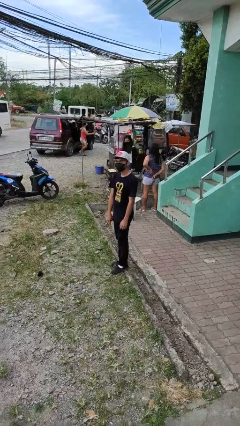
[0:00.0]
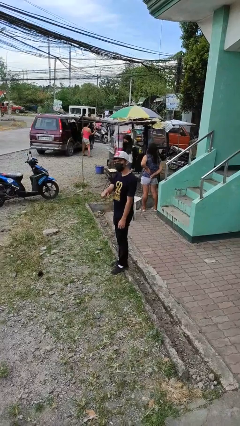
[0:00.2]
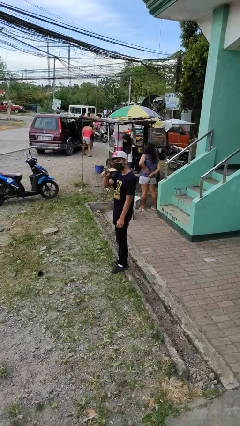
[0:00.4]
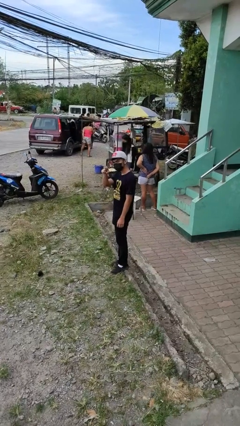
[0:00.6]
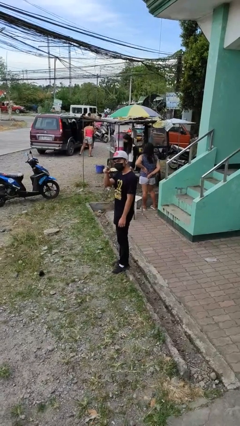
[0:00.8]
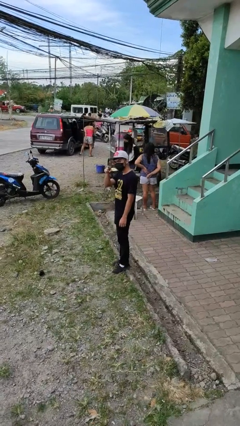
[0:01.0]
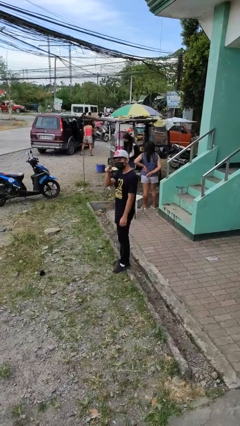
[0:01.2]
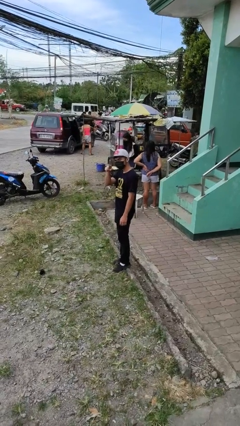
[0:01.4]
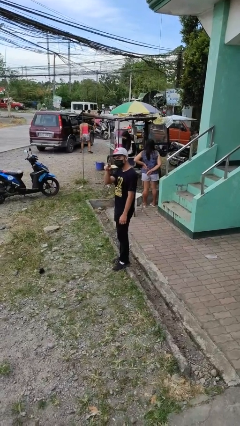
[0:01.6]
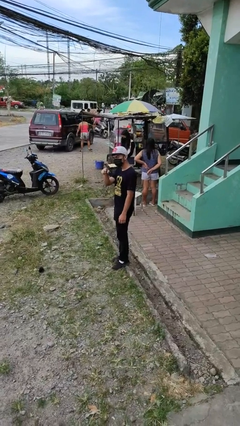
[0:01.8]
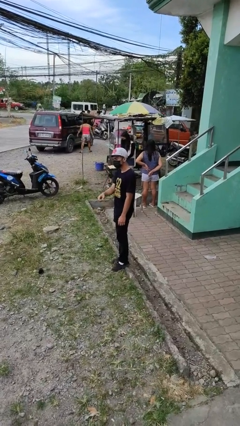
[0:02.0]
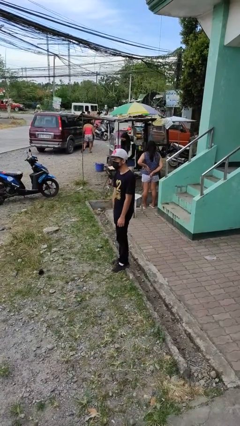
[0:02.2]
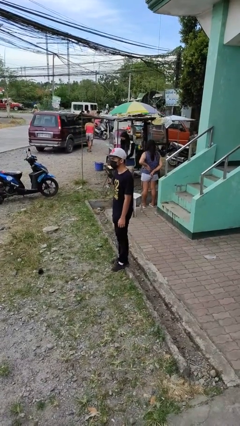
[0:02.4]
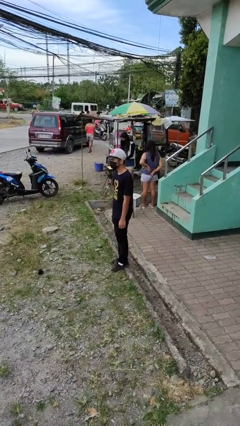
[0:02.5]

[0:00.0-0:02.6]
person points at person

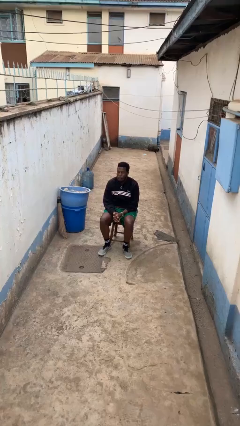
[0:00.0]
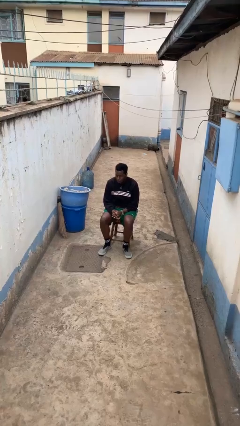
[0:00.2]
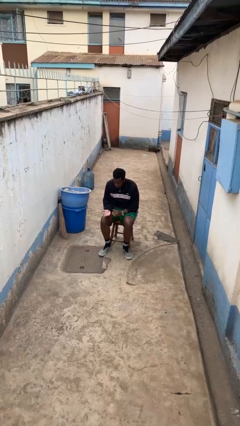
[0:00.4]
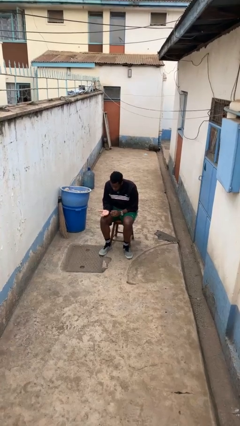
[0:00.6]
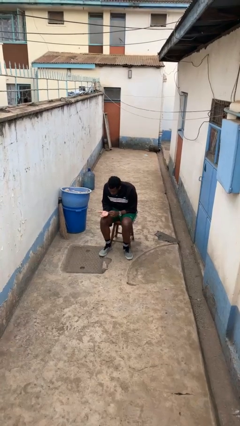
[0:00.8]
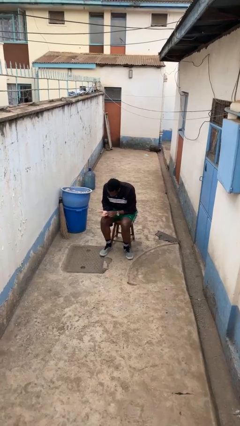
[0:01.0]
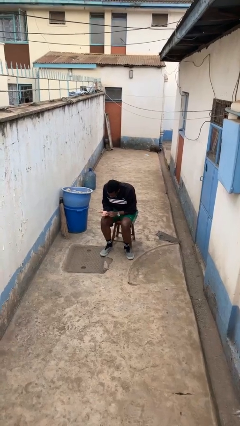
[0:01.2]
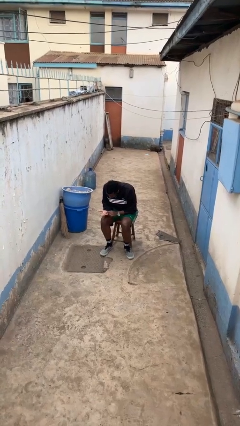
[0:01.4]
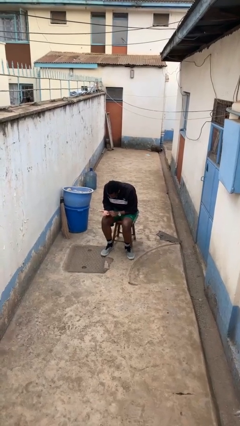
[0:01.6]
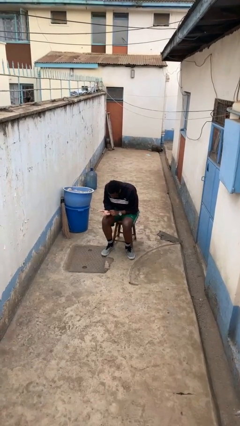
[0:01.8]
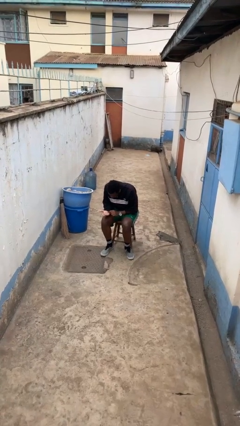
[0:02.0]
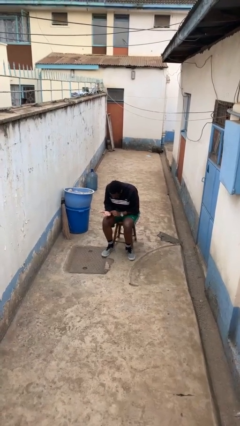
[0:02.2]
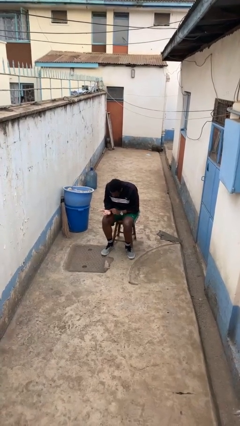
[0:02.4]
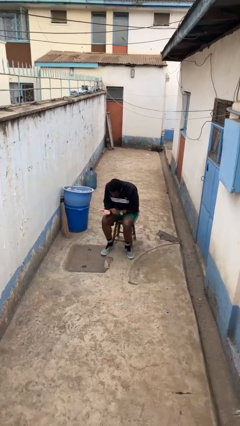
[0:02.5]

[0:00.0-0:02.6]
person looks at hands in lap

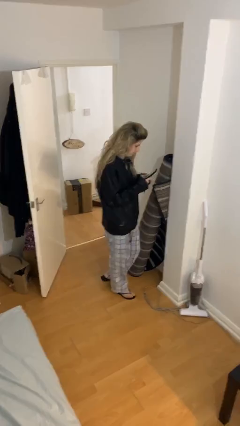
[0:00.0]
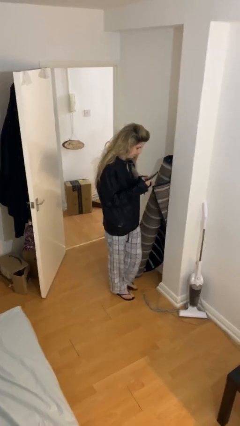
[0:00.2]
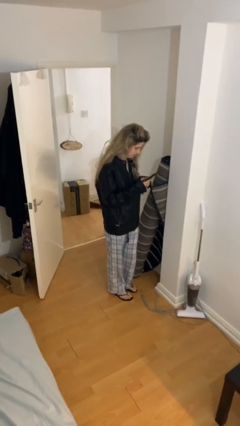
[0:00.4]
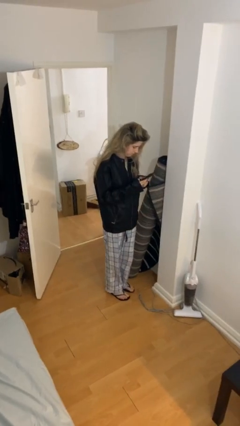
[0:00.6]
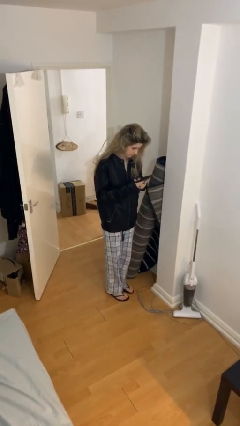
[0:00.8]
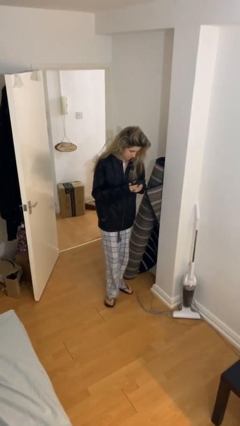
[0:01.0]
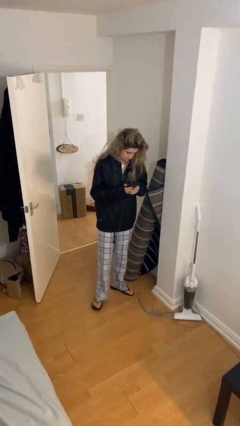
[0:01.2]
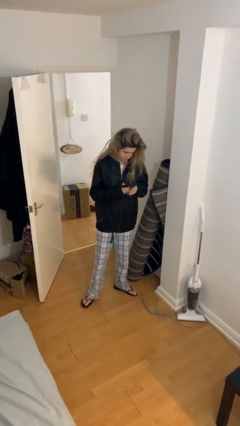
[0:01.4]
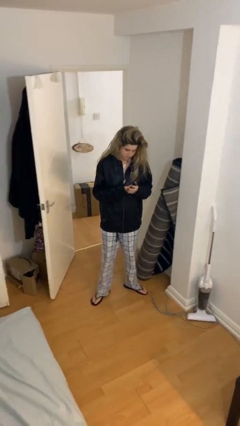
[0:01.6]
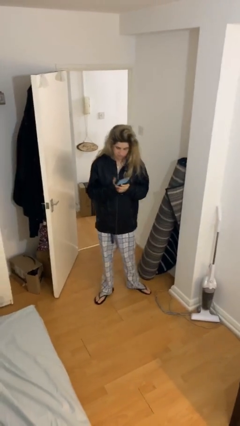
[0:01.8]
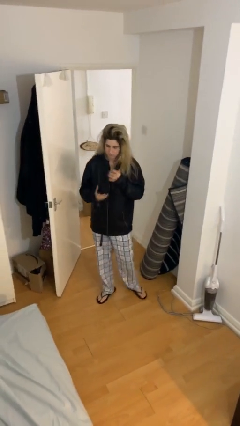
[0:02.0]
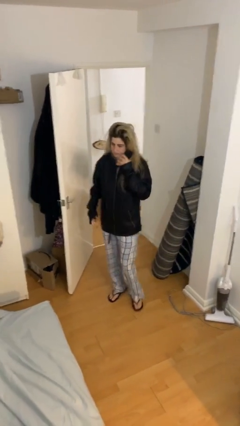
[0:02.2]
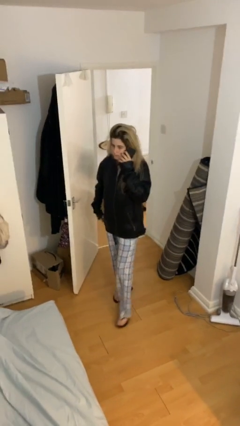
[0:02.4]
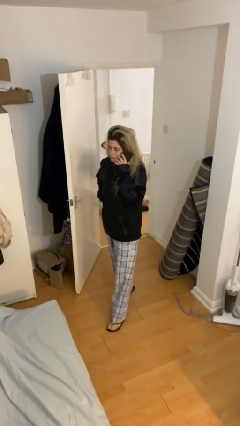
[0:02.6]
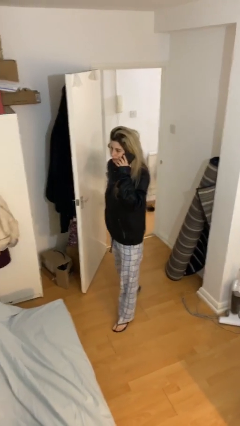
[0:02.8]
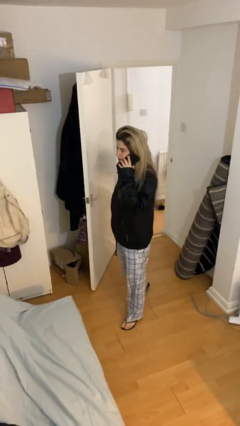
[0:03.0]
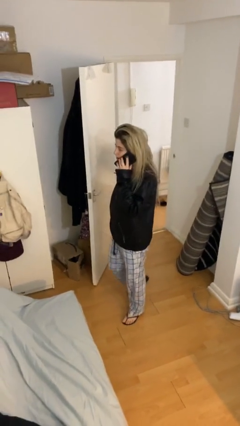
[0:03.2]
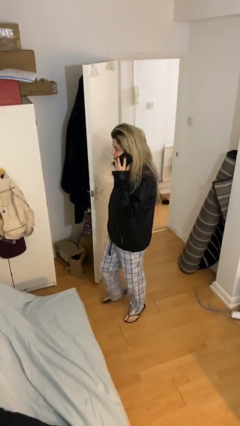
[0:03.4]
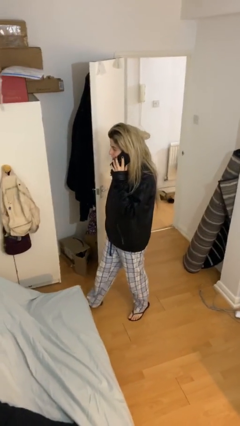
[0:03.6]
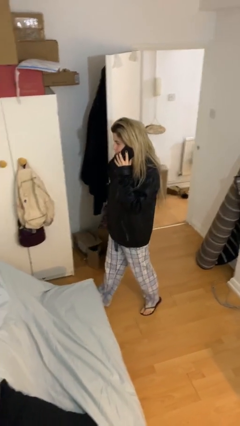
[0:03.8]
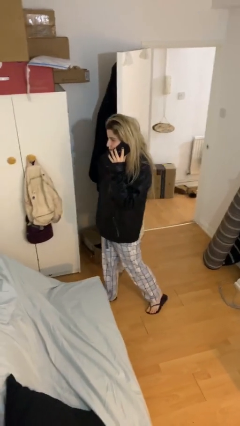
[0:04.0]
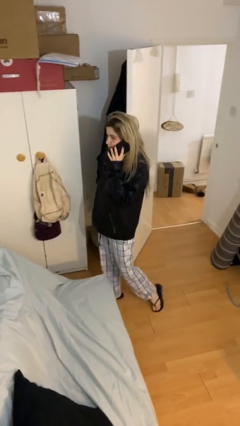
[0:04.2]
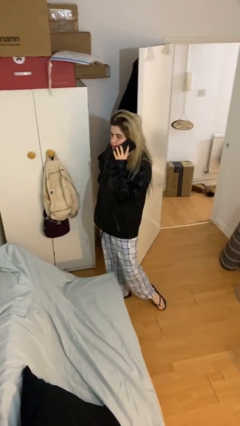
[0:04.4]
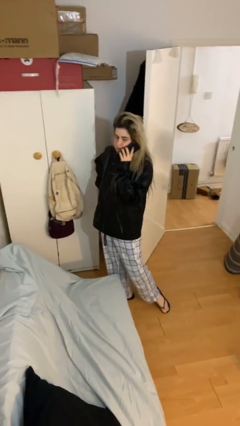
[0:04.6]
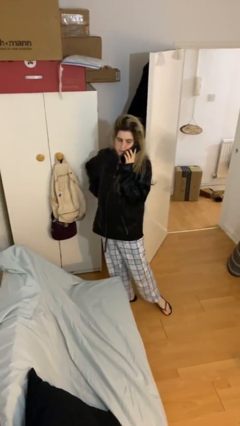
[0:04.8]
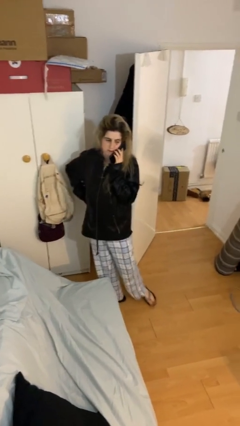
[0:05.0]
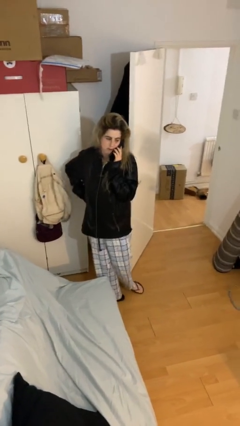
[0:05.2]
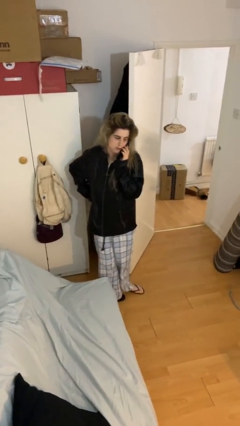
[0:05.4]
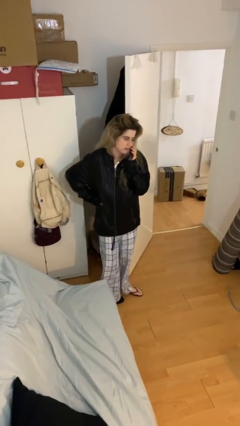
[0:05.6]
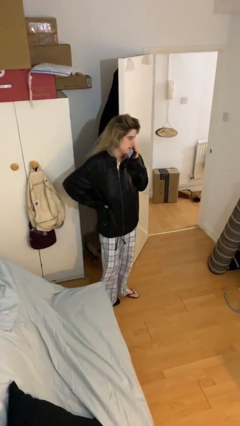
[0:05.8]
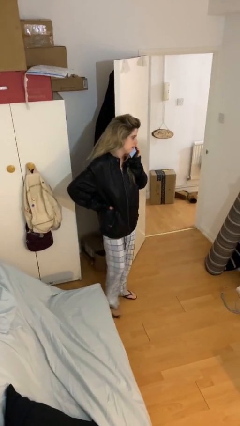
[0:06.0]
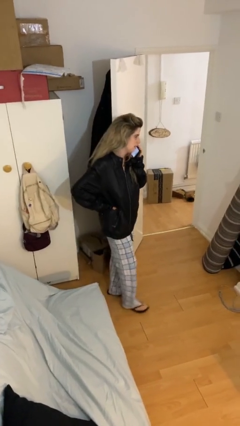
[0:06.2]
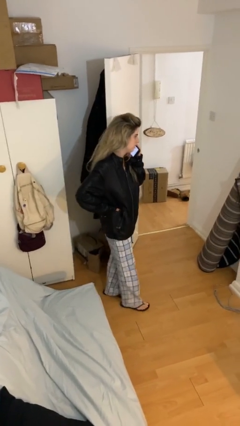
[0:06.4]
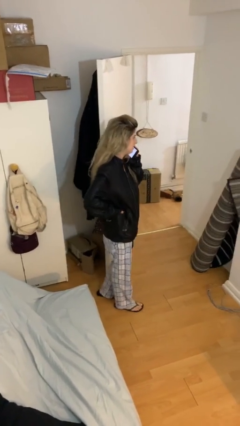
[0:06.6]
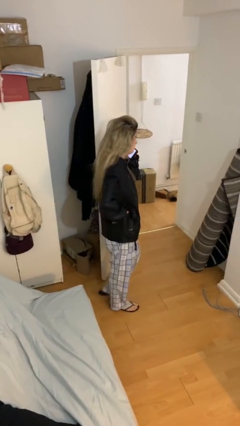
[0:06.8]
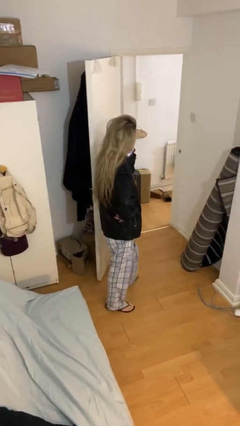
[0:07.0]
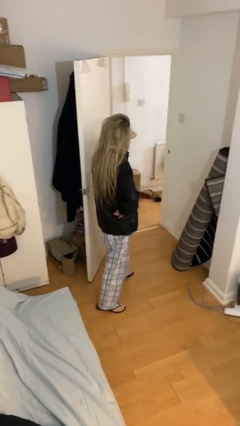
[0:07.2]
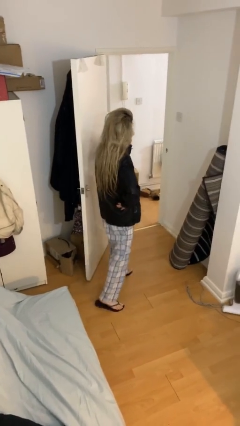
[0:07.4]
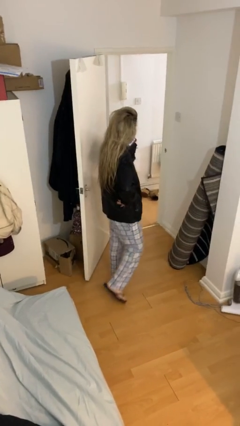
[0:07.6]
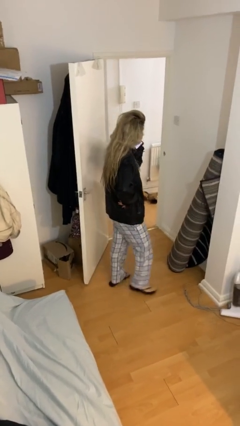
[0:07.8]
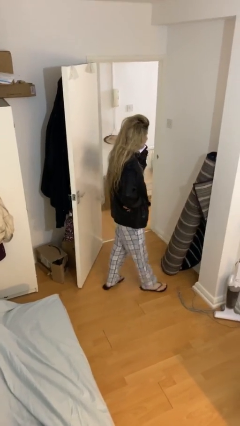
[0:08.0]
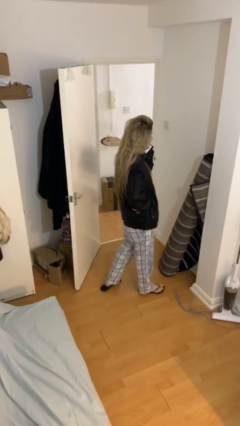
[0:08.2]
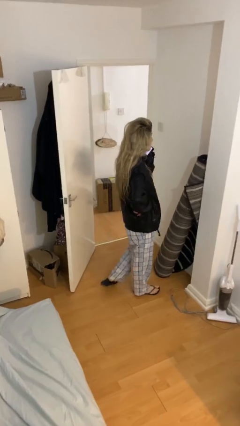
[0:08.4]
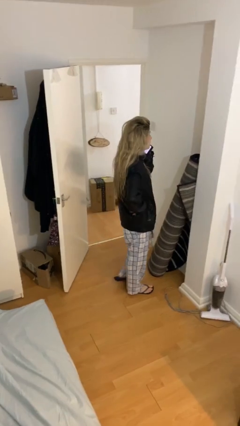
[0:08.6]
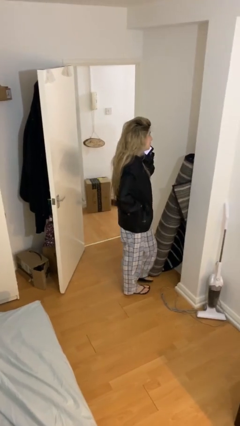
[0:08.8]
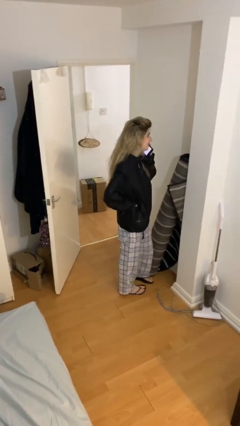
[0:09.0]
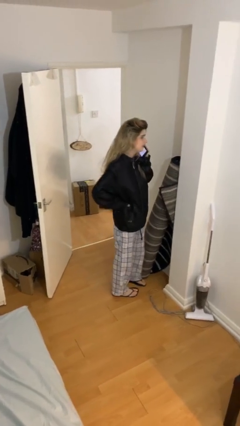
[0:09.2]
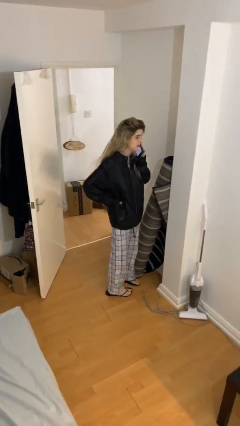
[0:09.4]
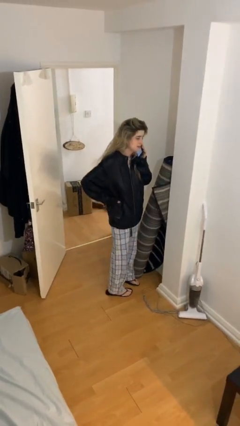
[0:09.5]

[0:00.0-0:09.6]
person talks on phone

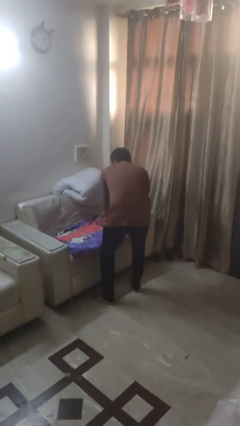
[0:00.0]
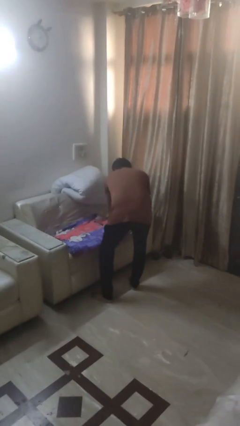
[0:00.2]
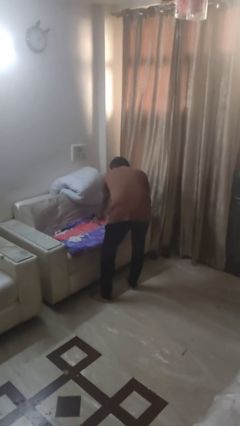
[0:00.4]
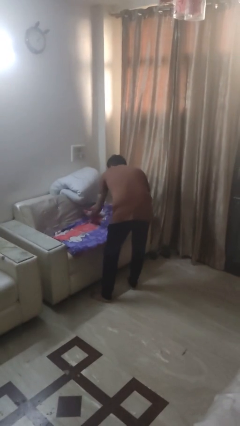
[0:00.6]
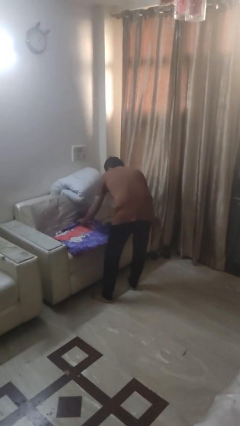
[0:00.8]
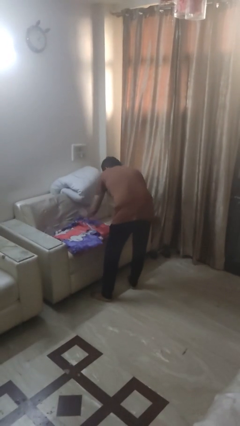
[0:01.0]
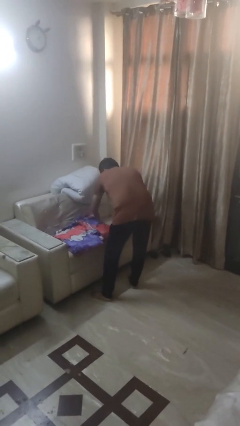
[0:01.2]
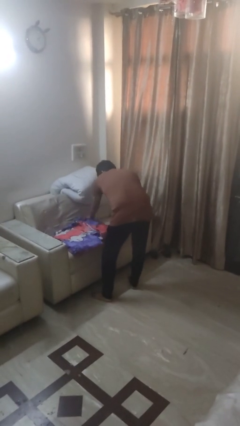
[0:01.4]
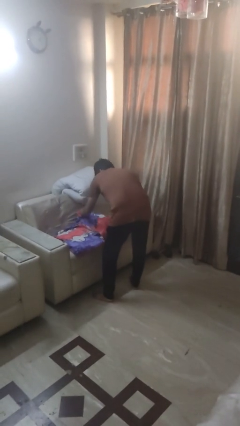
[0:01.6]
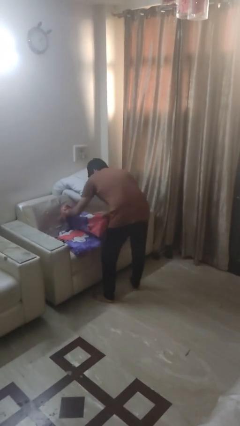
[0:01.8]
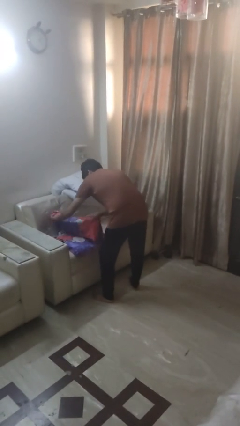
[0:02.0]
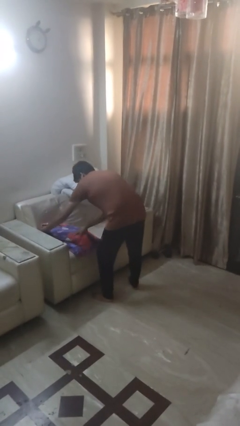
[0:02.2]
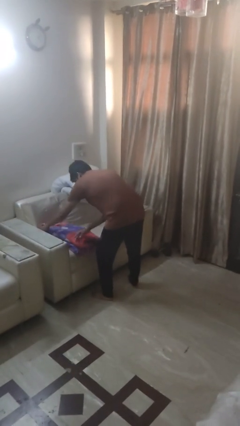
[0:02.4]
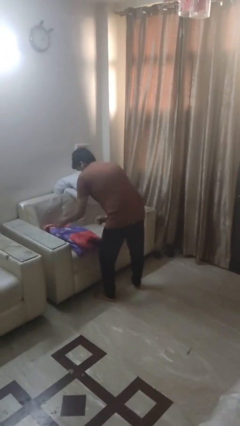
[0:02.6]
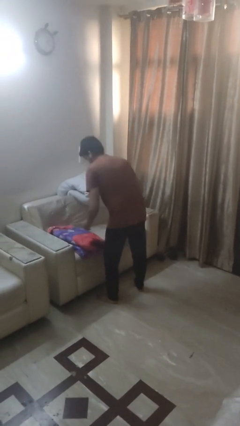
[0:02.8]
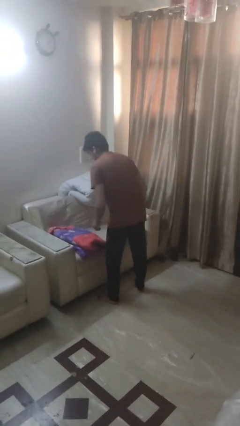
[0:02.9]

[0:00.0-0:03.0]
person folds blanket
